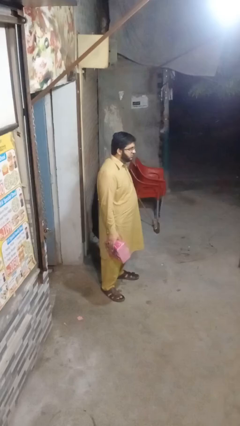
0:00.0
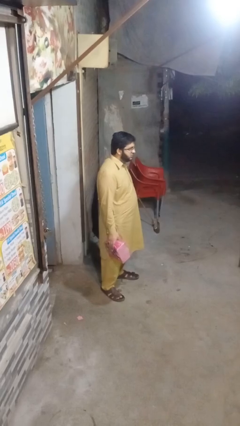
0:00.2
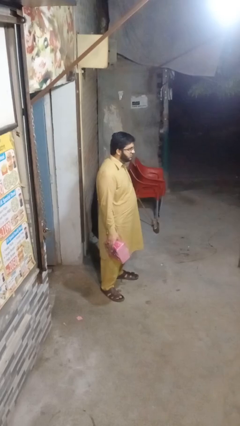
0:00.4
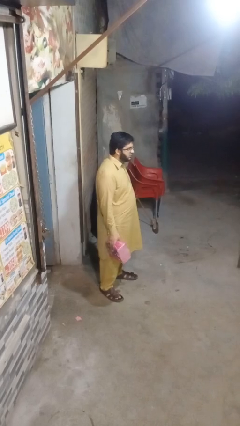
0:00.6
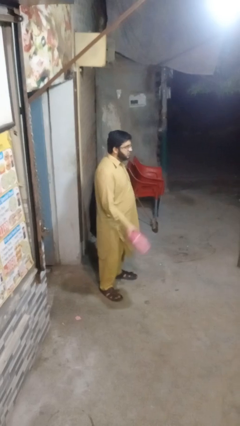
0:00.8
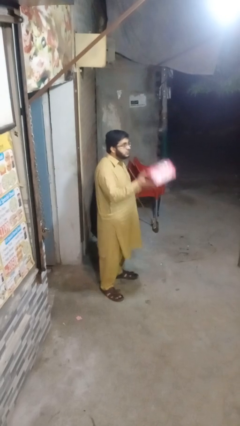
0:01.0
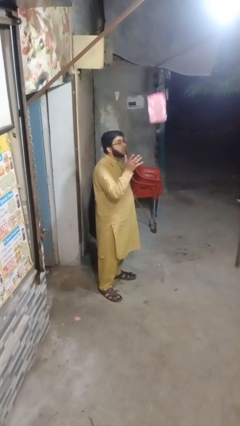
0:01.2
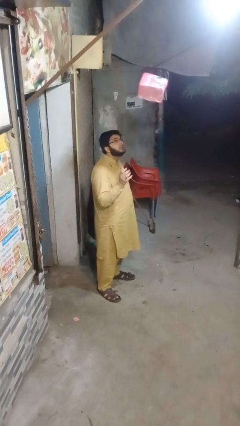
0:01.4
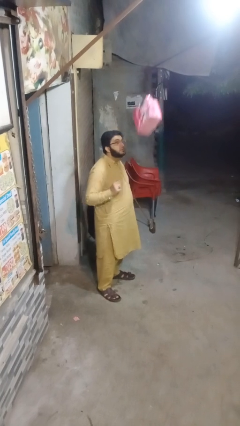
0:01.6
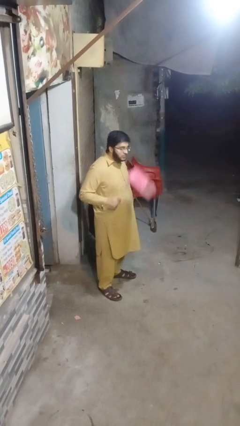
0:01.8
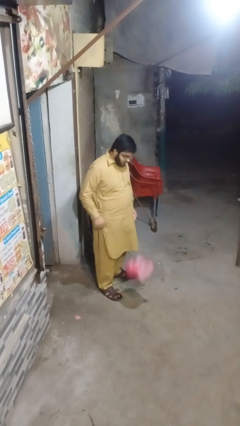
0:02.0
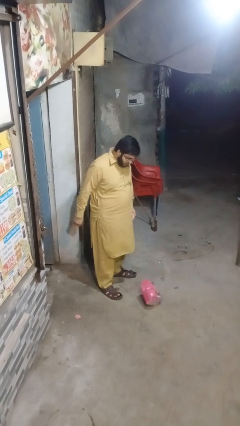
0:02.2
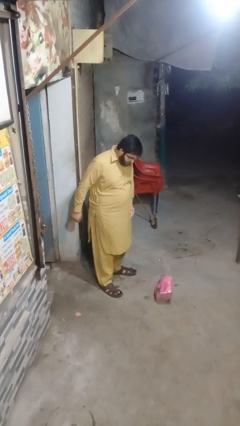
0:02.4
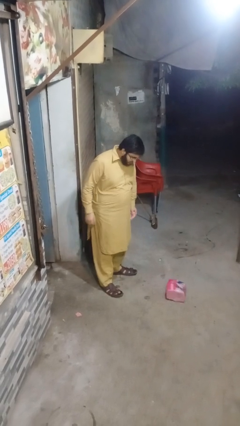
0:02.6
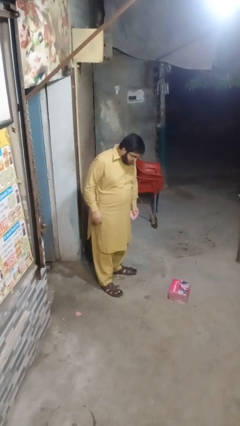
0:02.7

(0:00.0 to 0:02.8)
person throws object into air

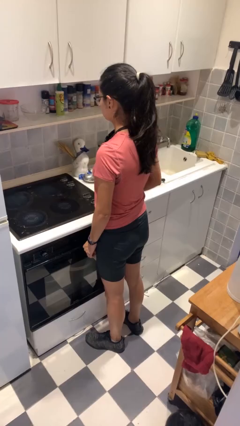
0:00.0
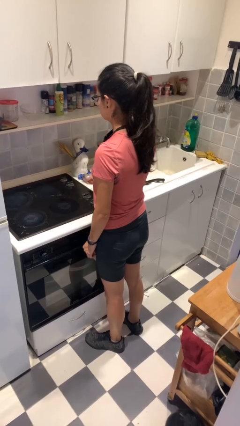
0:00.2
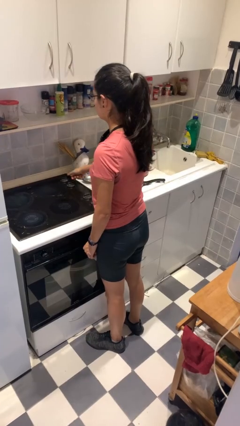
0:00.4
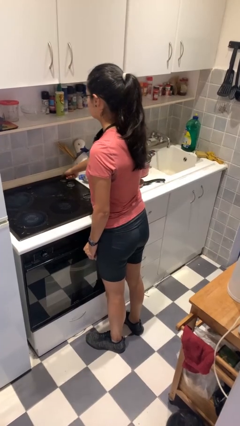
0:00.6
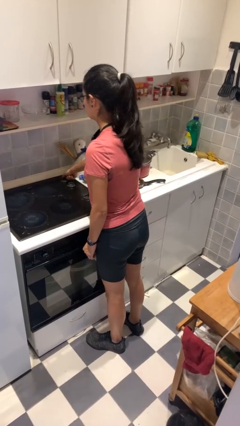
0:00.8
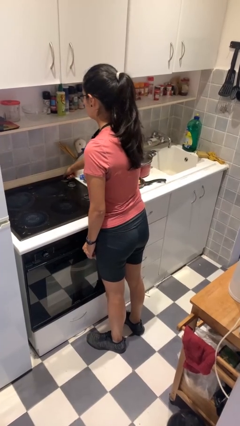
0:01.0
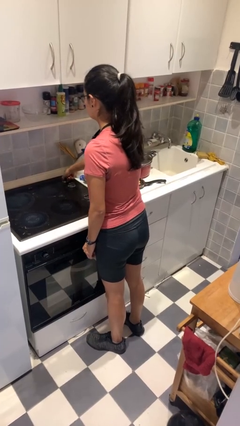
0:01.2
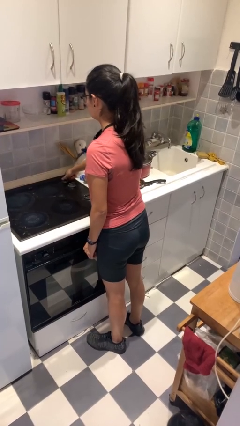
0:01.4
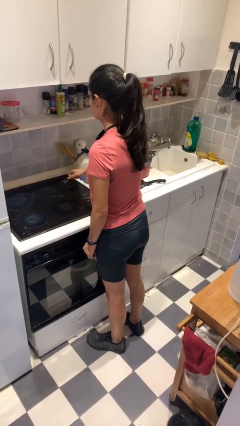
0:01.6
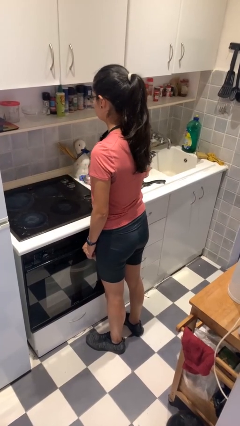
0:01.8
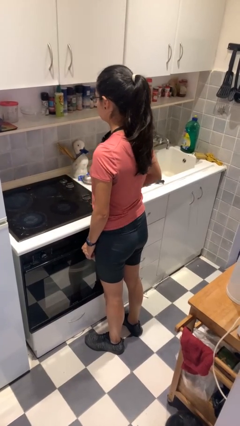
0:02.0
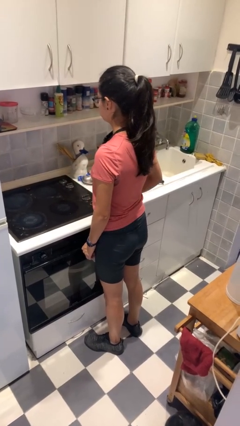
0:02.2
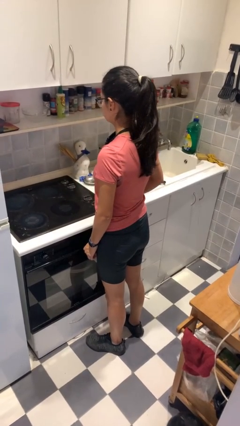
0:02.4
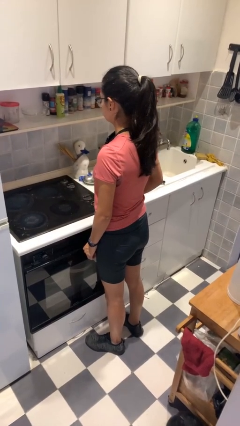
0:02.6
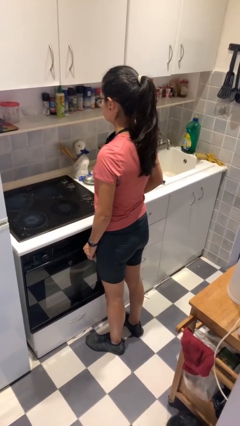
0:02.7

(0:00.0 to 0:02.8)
person turns on stovetop

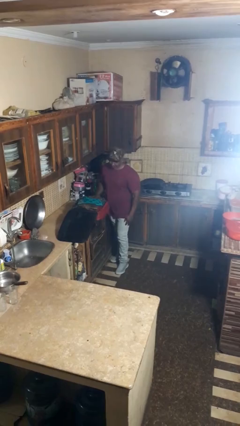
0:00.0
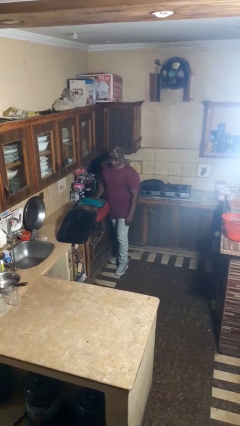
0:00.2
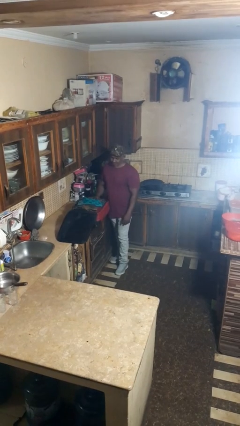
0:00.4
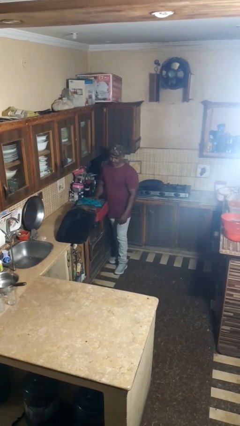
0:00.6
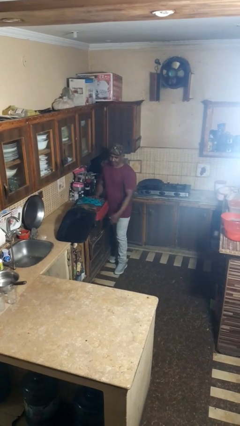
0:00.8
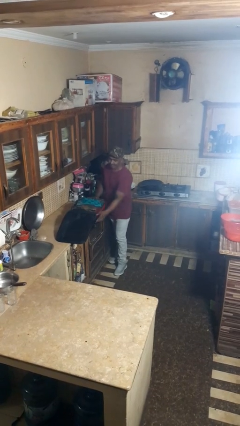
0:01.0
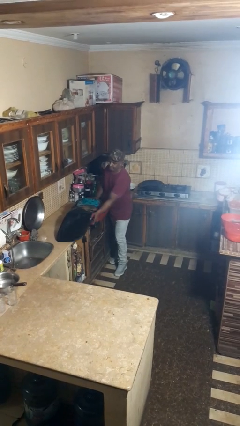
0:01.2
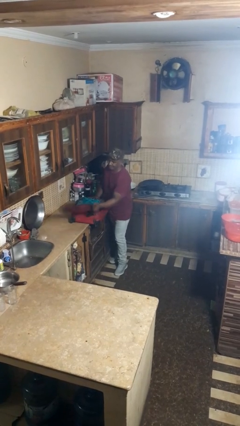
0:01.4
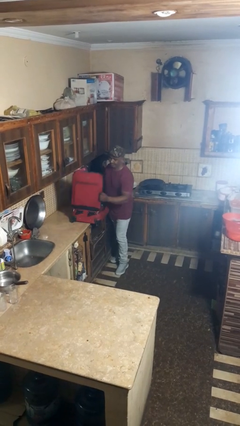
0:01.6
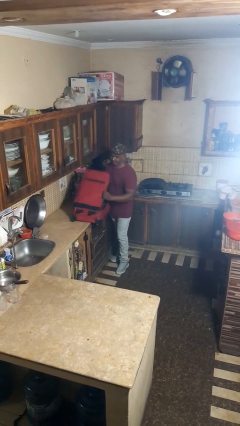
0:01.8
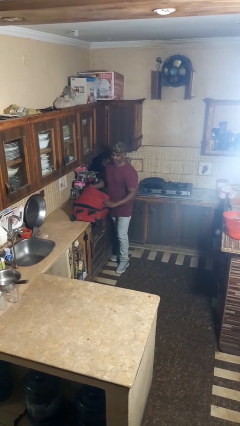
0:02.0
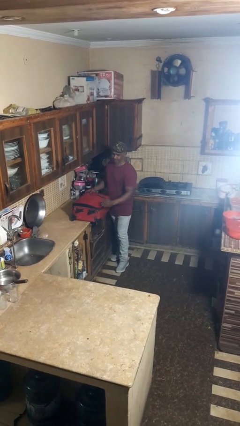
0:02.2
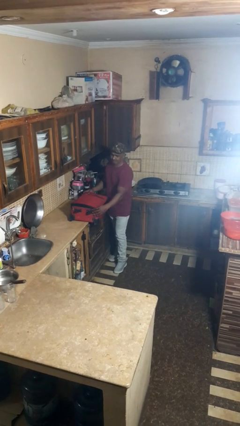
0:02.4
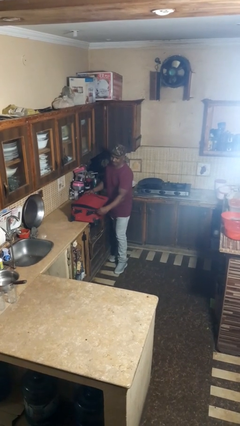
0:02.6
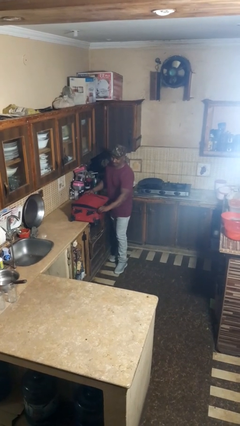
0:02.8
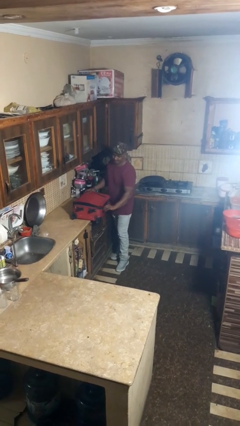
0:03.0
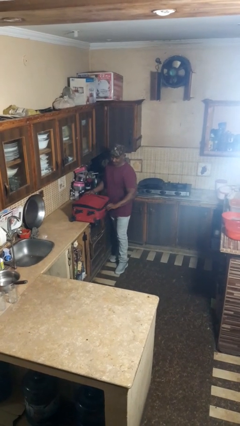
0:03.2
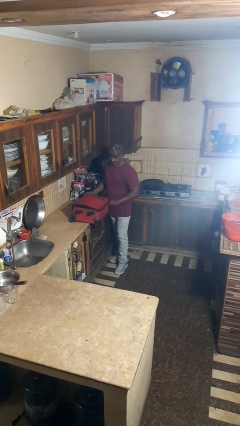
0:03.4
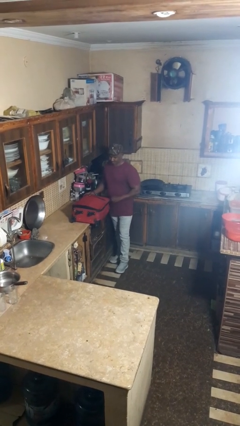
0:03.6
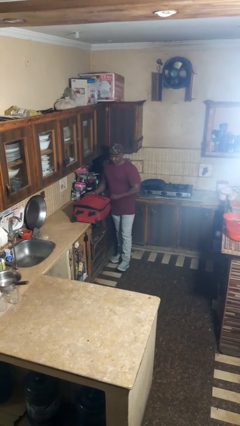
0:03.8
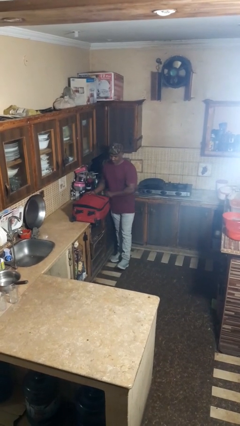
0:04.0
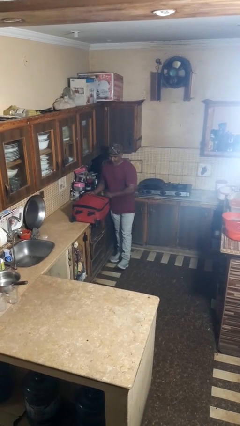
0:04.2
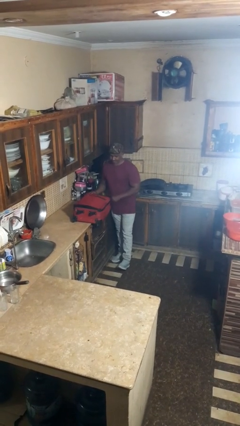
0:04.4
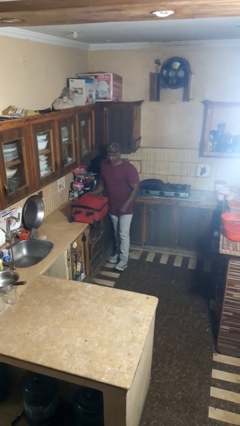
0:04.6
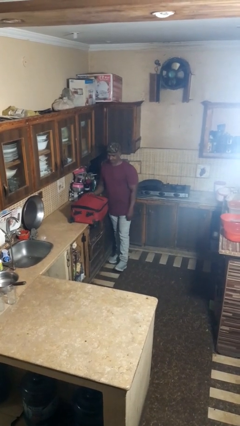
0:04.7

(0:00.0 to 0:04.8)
person closes suitcase

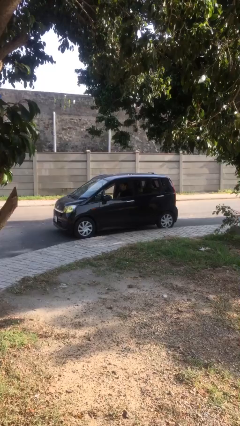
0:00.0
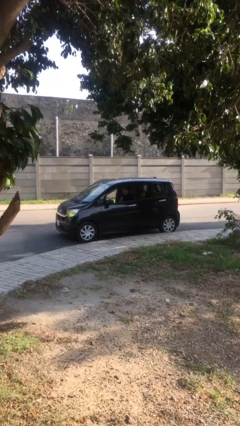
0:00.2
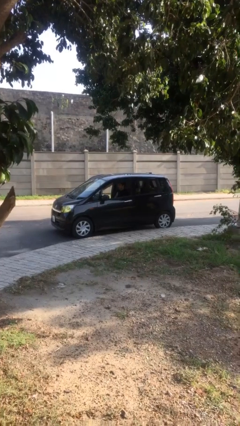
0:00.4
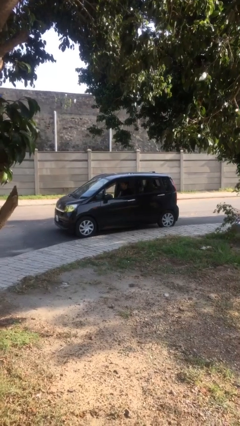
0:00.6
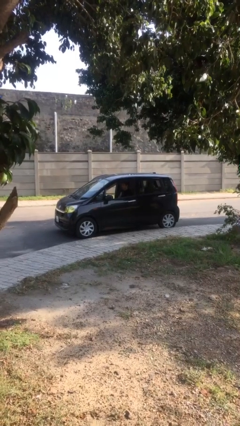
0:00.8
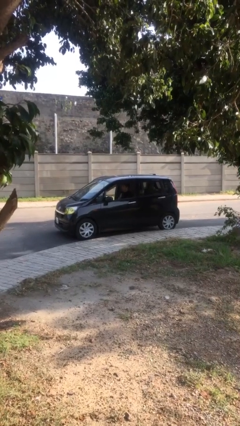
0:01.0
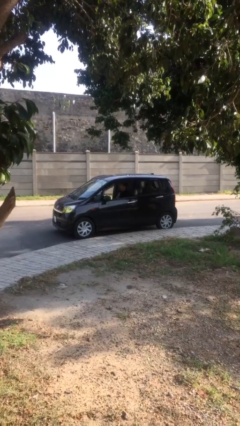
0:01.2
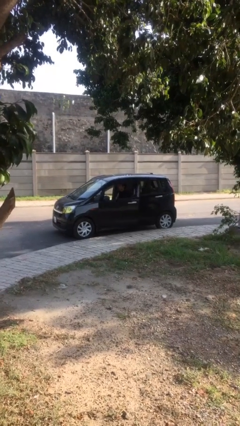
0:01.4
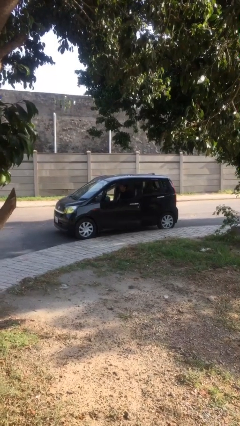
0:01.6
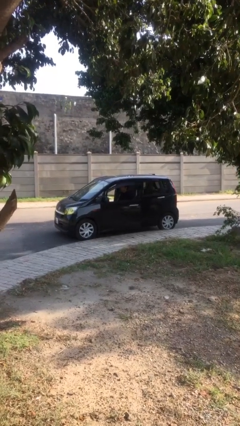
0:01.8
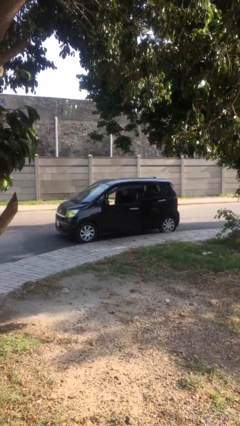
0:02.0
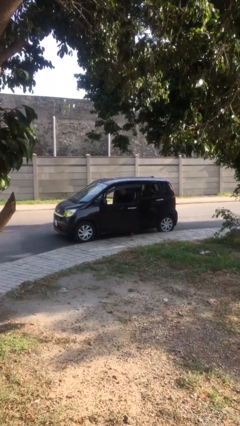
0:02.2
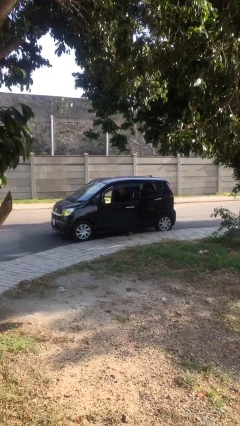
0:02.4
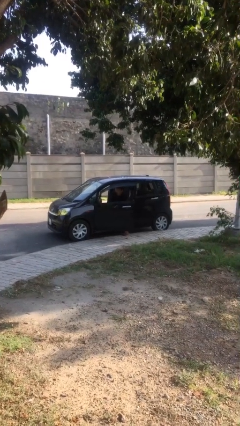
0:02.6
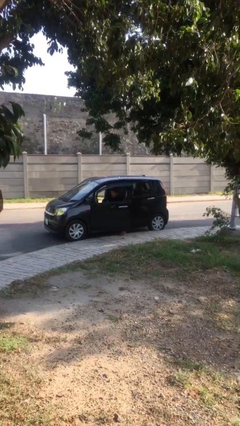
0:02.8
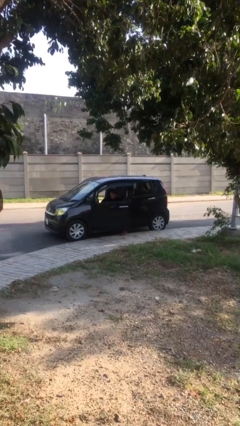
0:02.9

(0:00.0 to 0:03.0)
person opens car door

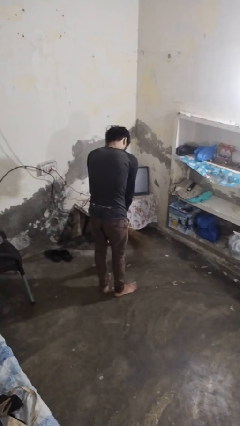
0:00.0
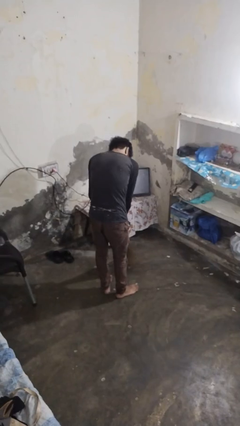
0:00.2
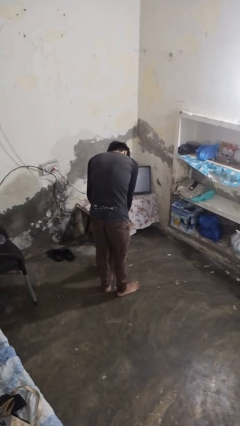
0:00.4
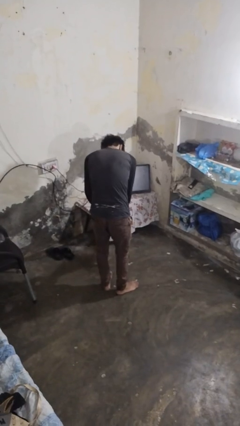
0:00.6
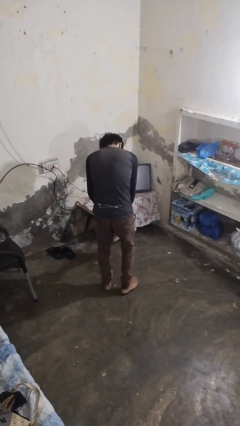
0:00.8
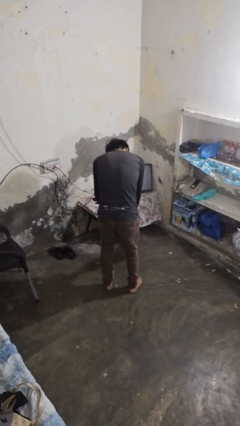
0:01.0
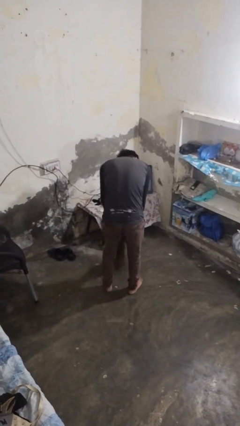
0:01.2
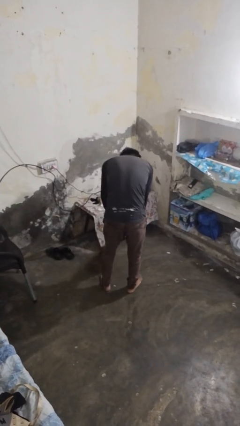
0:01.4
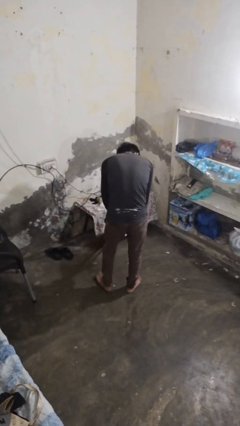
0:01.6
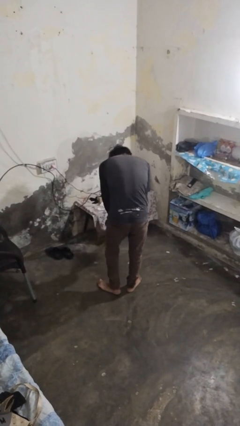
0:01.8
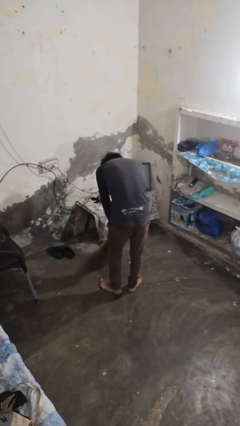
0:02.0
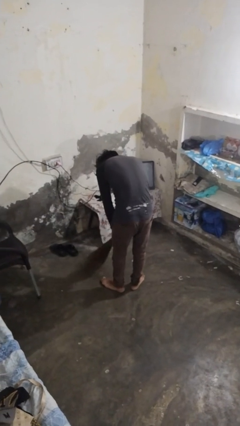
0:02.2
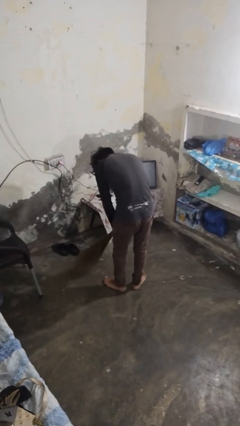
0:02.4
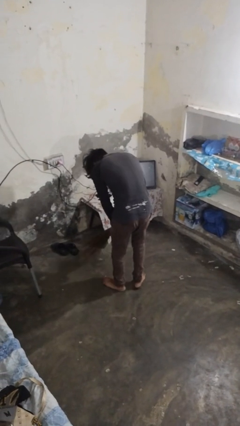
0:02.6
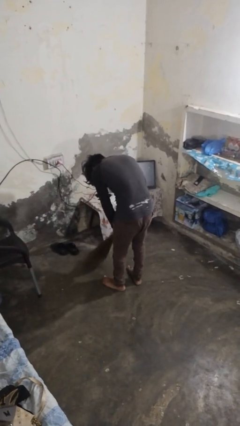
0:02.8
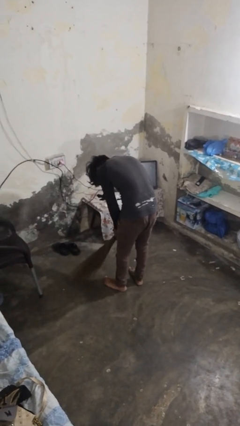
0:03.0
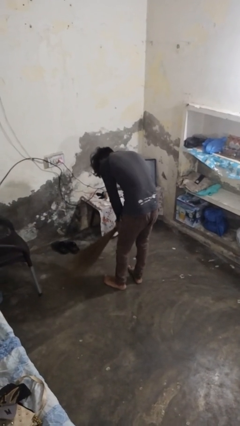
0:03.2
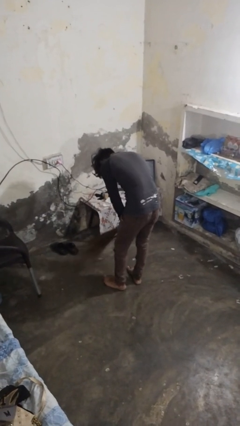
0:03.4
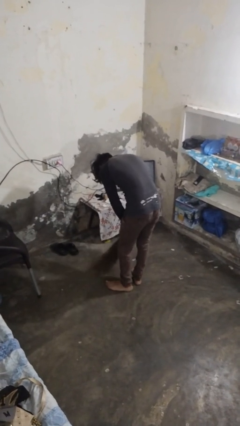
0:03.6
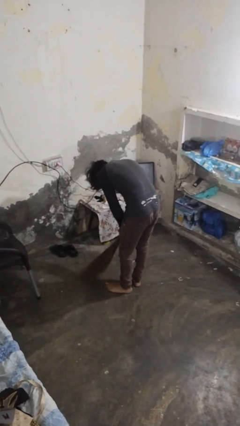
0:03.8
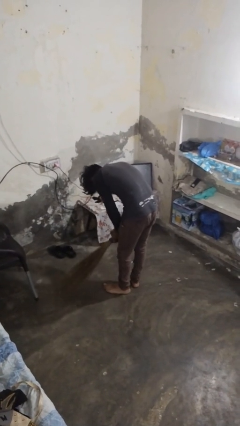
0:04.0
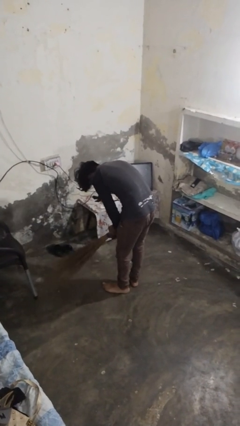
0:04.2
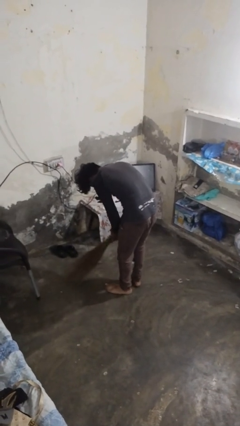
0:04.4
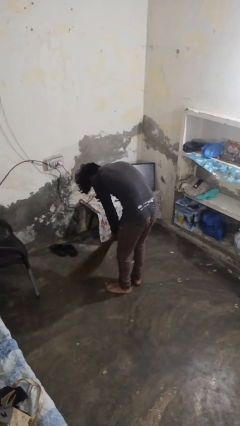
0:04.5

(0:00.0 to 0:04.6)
person sweeps floor
